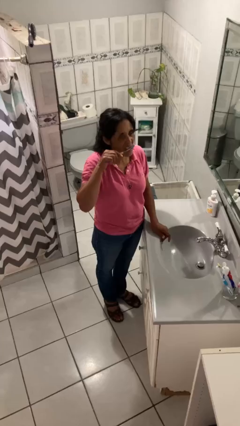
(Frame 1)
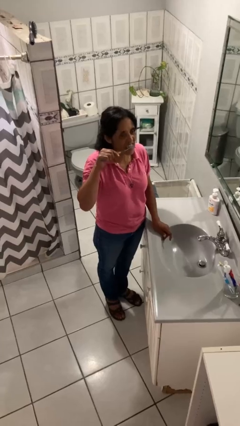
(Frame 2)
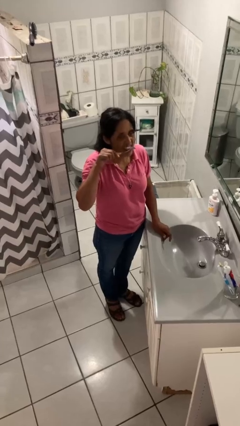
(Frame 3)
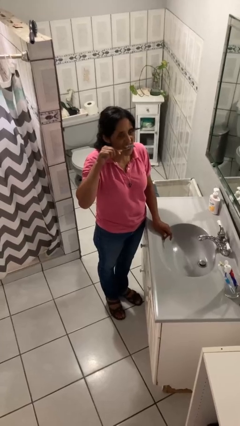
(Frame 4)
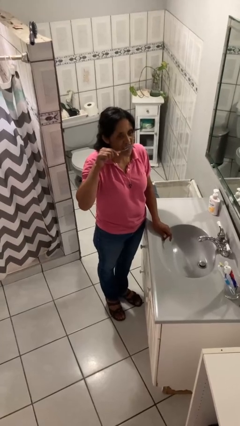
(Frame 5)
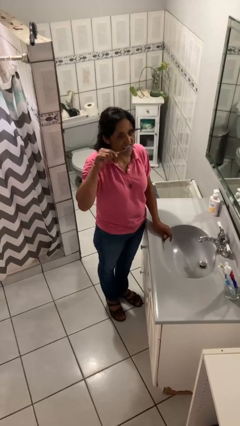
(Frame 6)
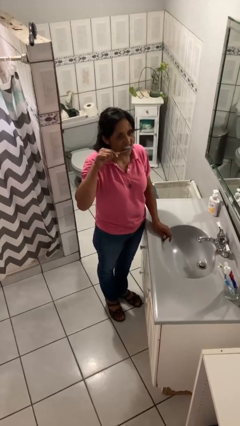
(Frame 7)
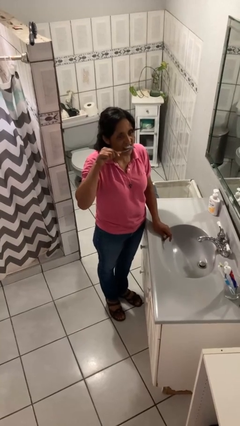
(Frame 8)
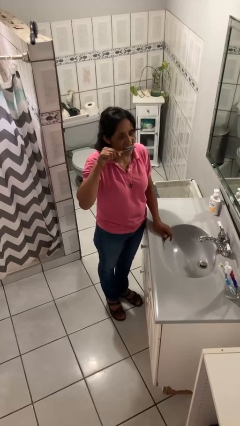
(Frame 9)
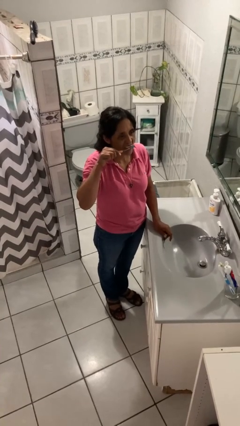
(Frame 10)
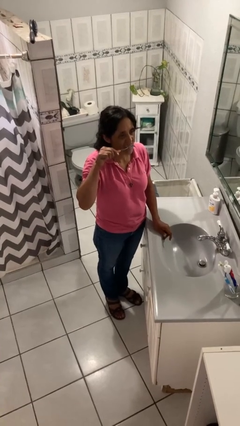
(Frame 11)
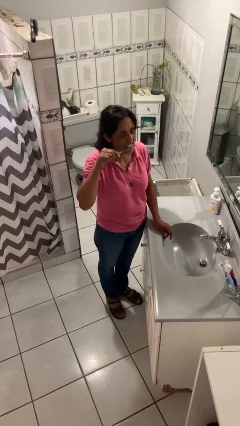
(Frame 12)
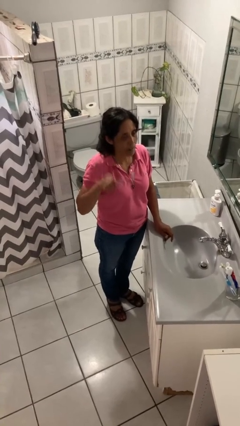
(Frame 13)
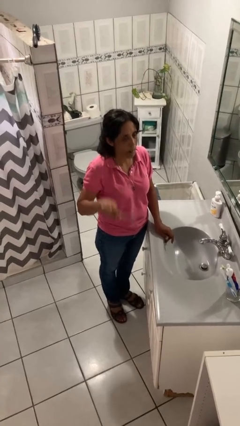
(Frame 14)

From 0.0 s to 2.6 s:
person brushes teeth

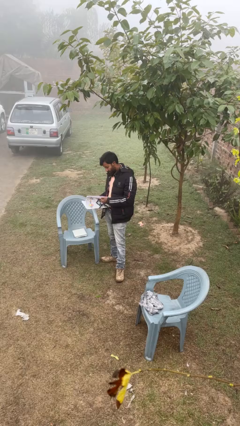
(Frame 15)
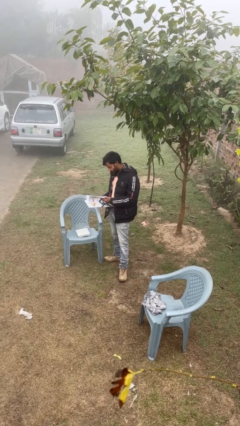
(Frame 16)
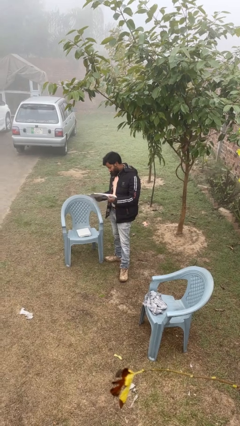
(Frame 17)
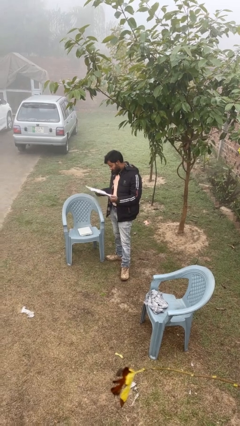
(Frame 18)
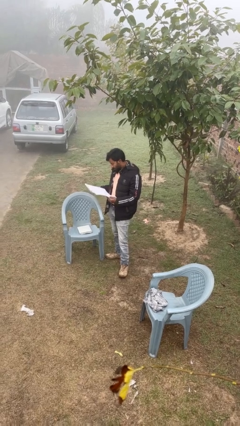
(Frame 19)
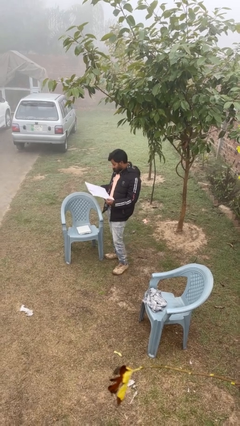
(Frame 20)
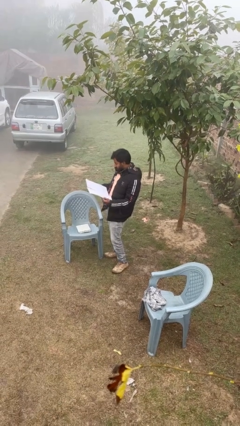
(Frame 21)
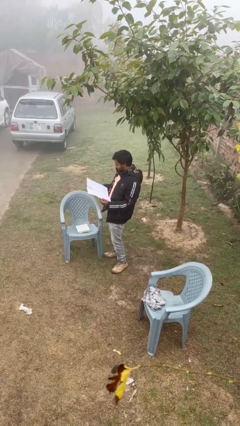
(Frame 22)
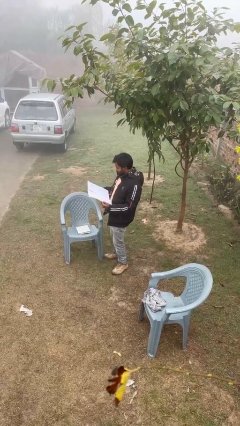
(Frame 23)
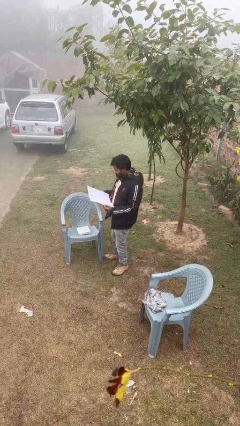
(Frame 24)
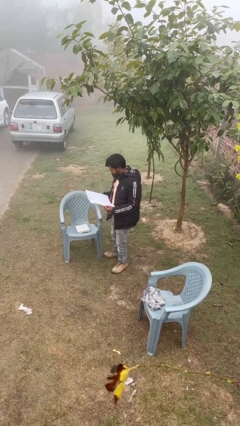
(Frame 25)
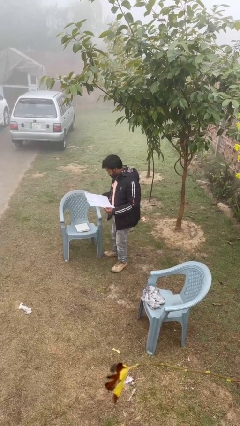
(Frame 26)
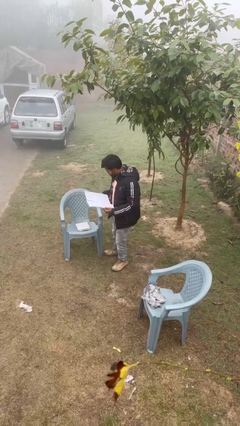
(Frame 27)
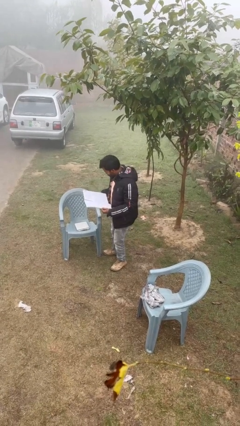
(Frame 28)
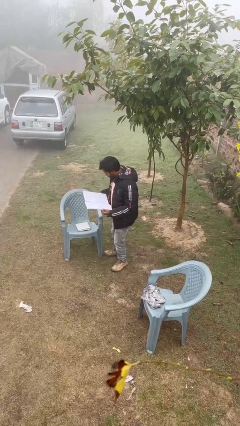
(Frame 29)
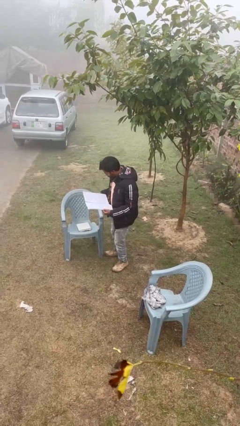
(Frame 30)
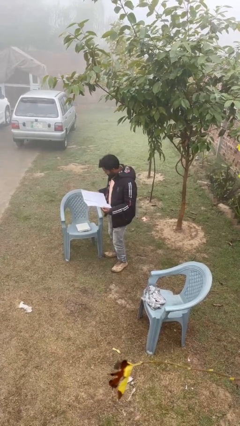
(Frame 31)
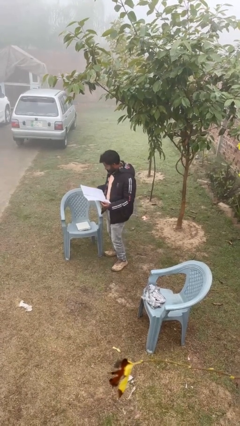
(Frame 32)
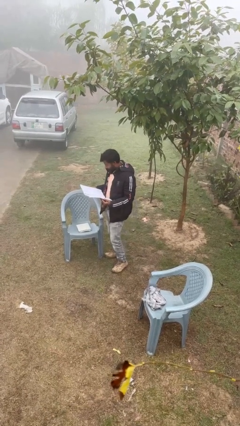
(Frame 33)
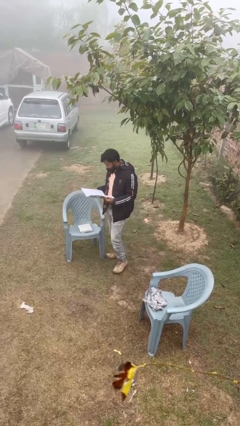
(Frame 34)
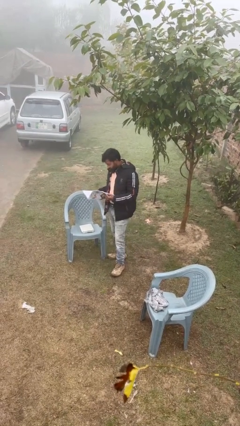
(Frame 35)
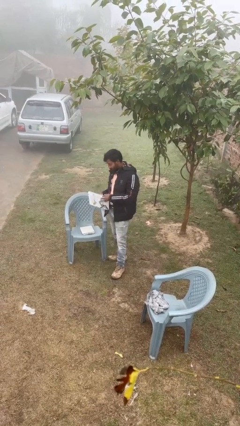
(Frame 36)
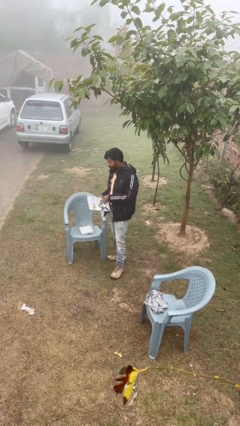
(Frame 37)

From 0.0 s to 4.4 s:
person reads document

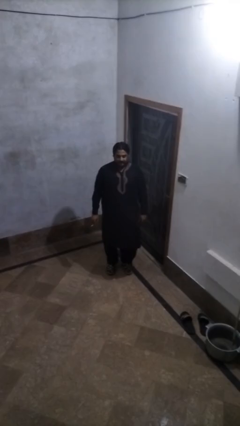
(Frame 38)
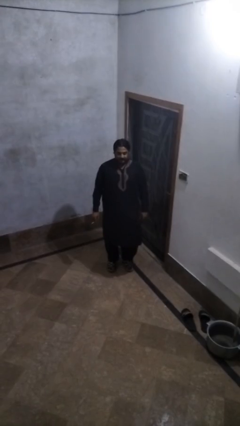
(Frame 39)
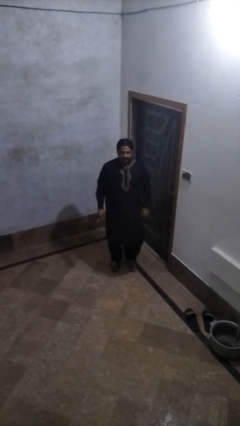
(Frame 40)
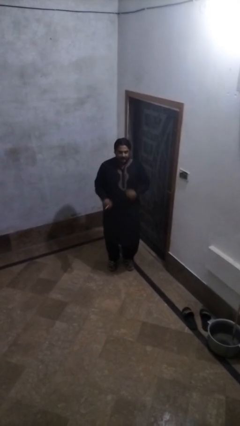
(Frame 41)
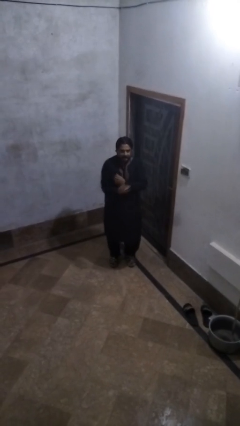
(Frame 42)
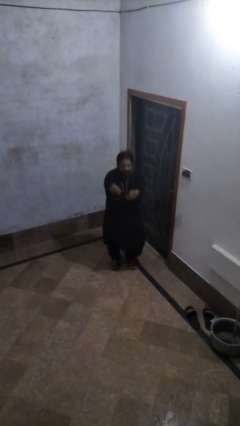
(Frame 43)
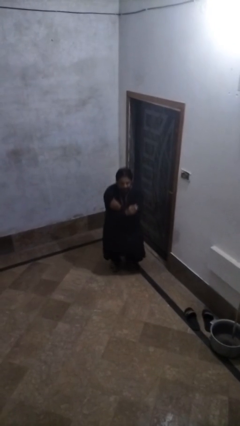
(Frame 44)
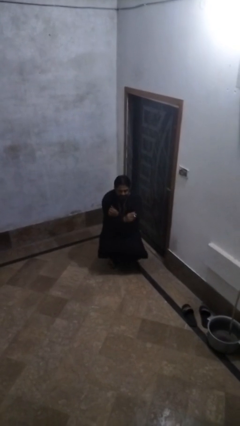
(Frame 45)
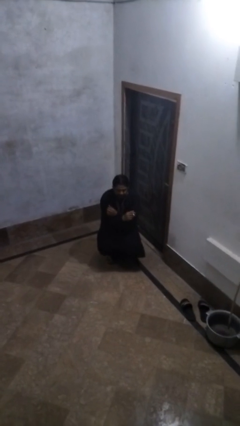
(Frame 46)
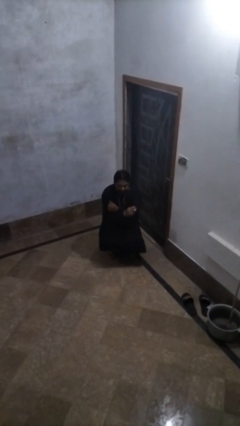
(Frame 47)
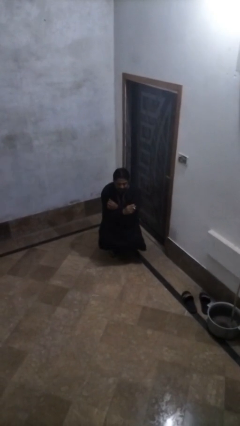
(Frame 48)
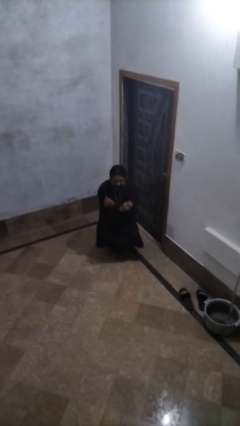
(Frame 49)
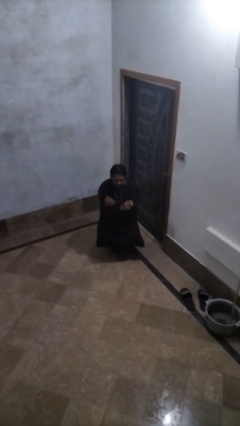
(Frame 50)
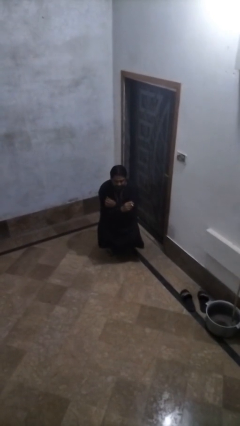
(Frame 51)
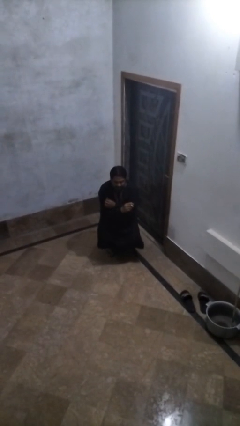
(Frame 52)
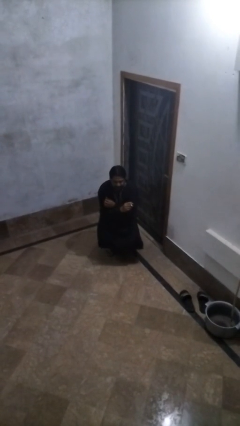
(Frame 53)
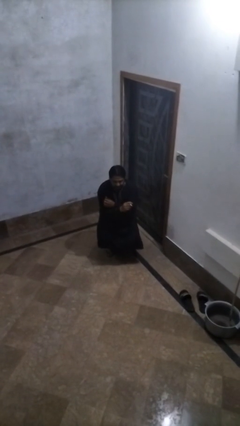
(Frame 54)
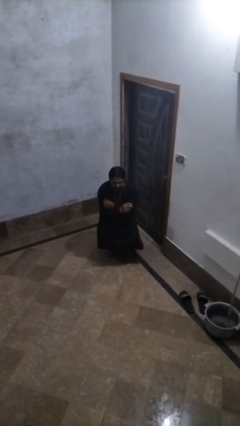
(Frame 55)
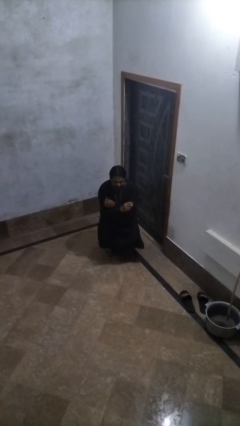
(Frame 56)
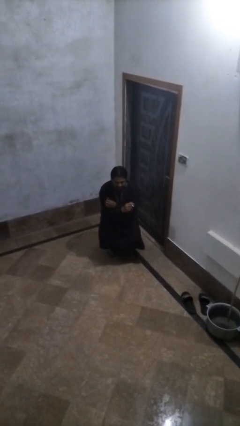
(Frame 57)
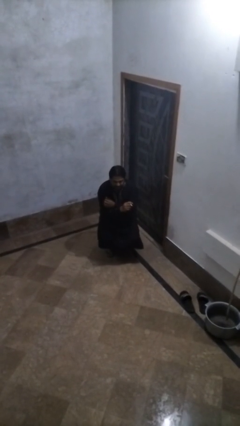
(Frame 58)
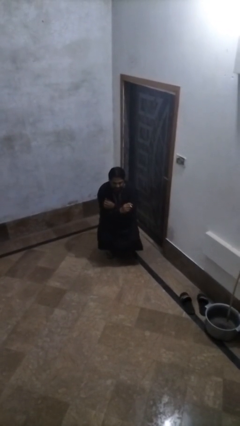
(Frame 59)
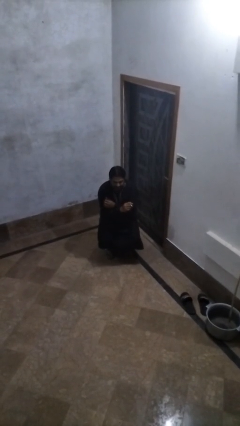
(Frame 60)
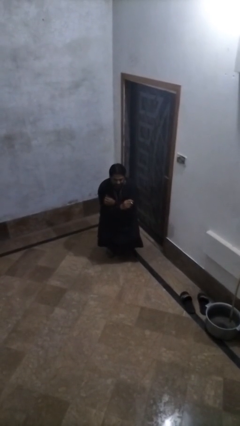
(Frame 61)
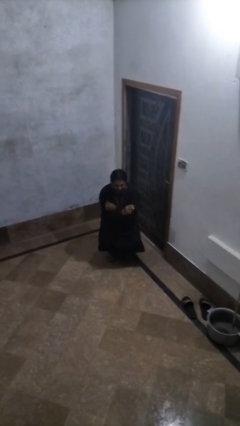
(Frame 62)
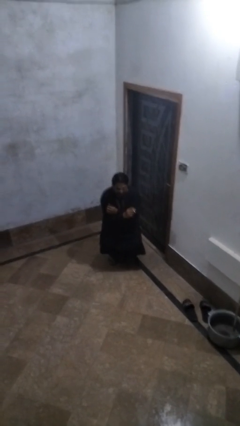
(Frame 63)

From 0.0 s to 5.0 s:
person squats

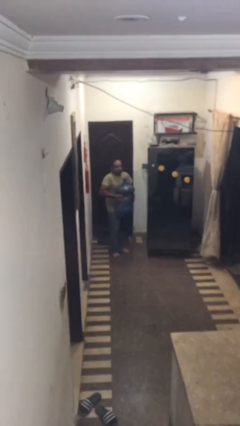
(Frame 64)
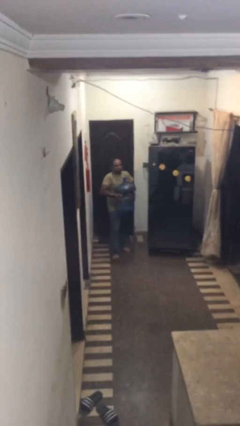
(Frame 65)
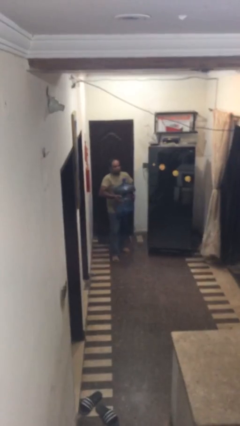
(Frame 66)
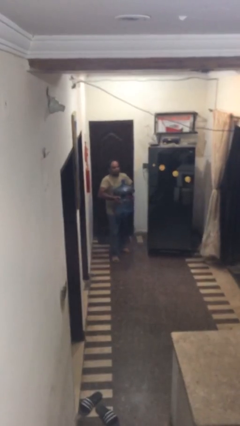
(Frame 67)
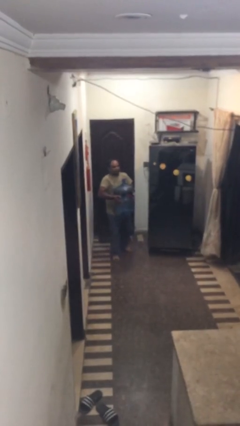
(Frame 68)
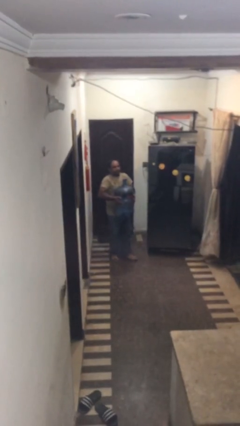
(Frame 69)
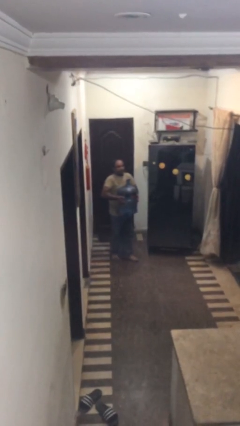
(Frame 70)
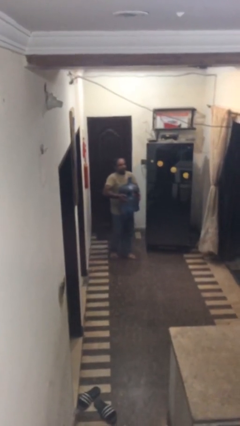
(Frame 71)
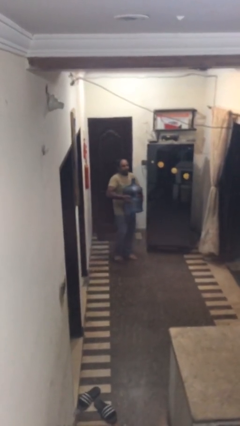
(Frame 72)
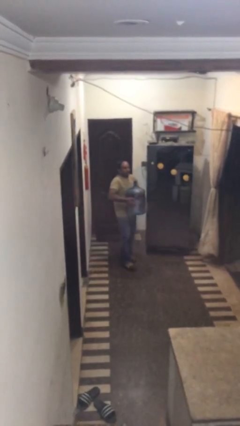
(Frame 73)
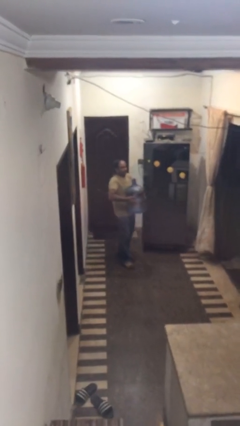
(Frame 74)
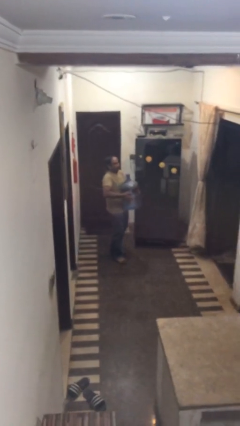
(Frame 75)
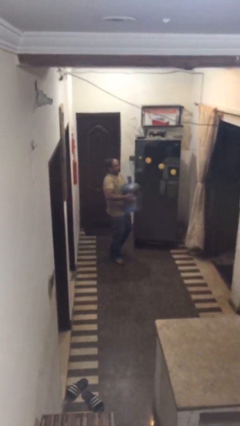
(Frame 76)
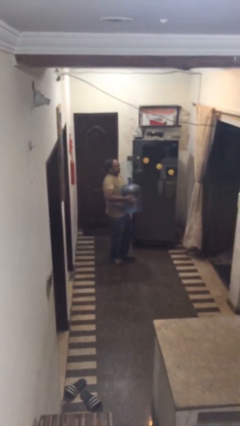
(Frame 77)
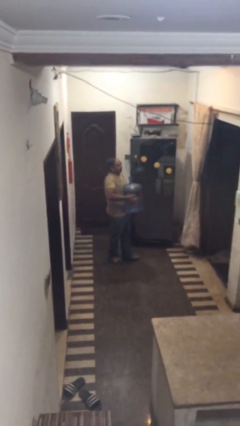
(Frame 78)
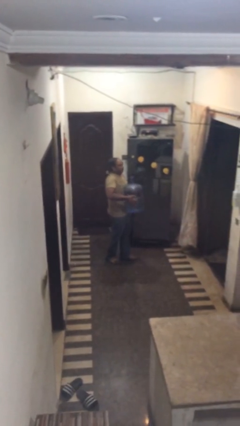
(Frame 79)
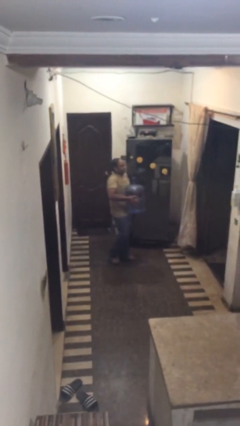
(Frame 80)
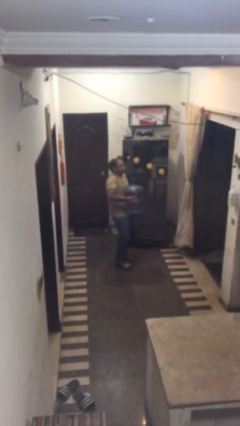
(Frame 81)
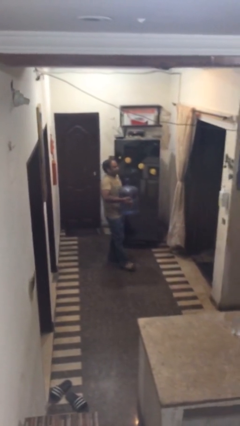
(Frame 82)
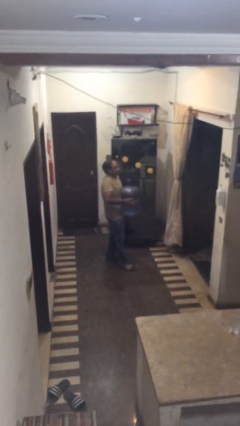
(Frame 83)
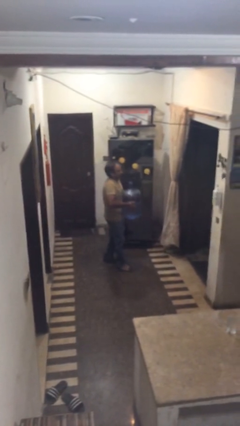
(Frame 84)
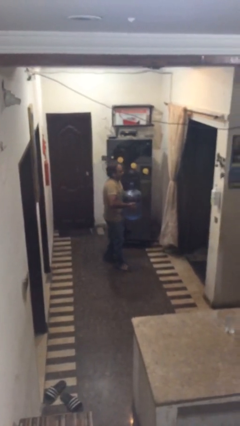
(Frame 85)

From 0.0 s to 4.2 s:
person carries heavy object

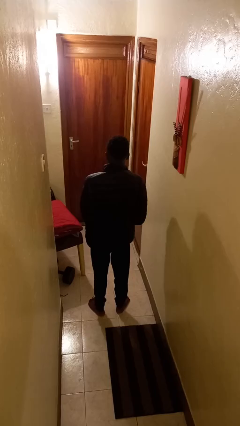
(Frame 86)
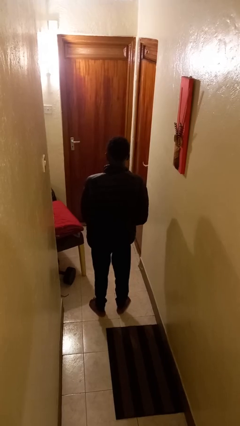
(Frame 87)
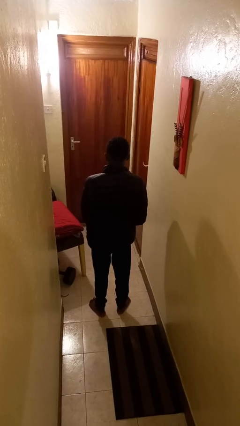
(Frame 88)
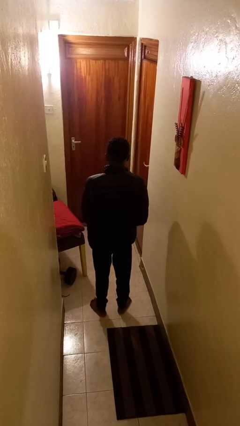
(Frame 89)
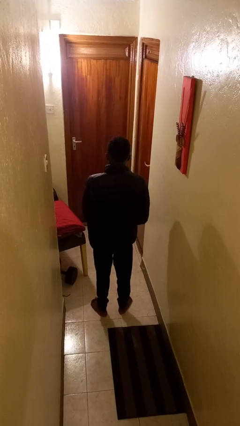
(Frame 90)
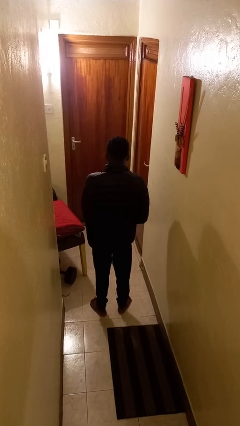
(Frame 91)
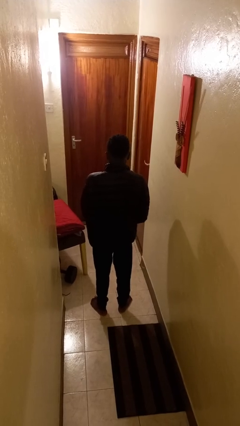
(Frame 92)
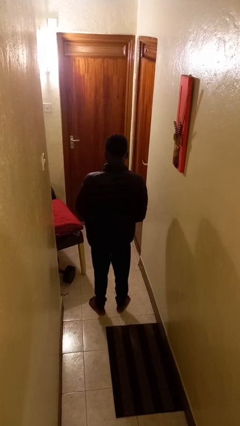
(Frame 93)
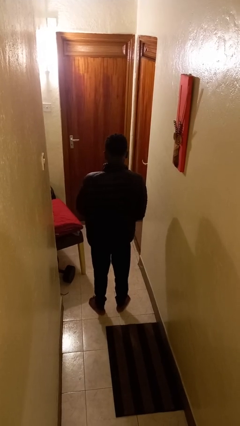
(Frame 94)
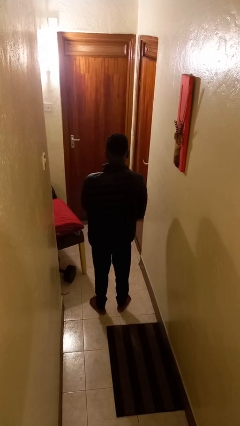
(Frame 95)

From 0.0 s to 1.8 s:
person zips up jacket
